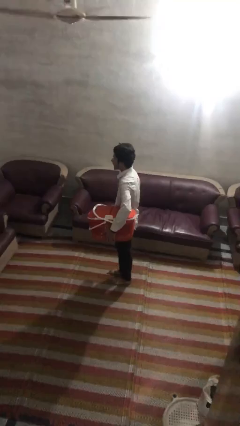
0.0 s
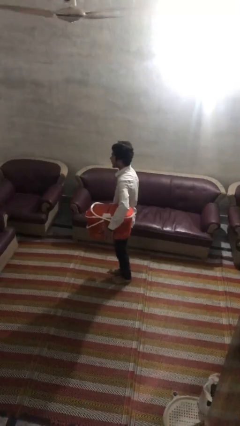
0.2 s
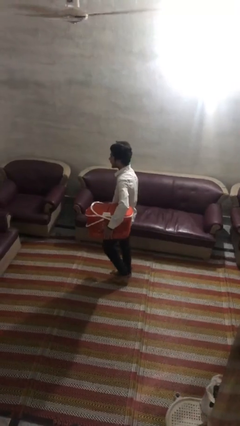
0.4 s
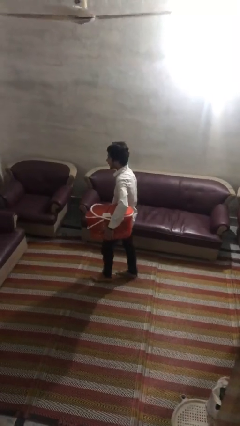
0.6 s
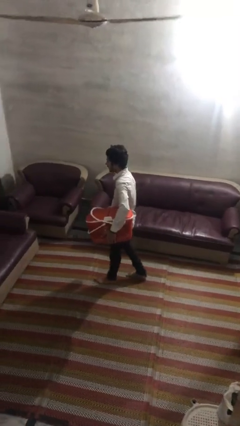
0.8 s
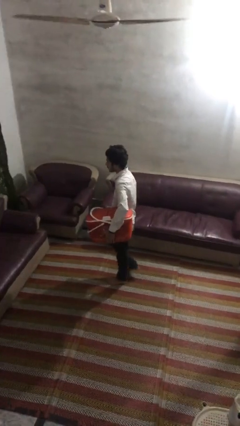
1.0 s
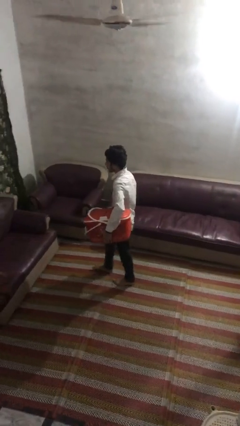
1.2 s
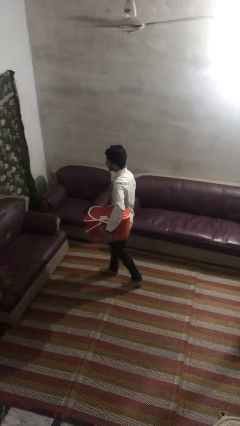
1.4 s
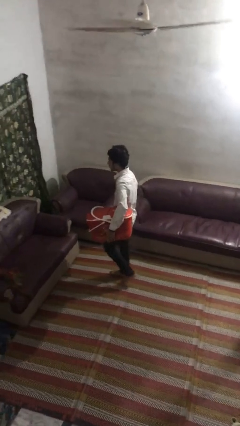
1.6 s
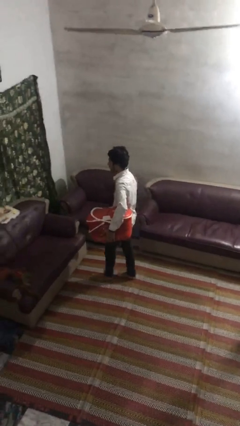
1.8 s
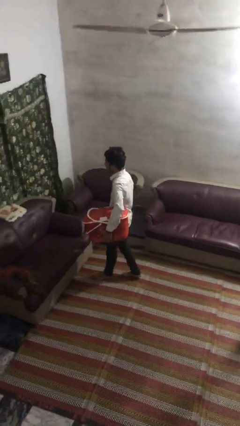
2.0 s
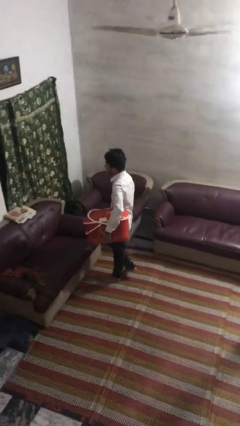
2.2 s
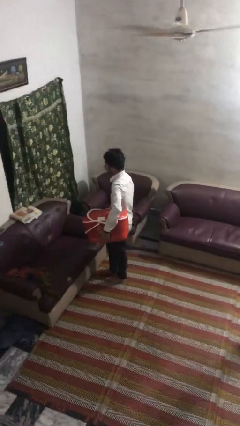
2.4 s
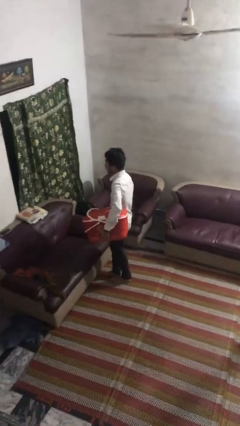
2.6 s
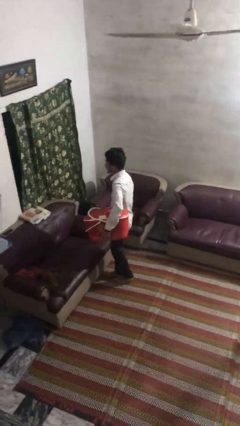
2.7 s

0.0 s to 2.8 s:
person carries laundry basket

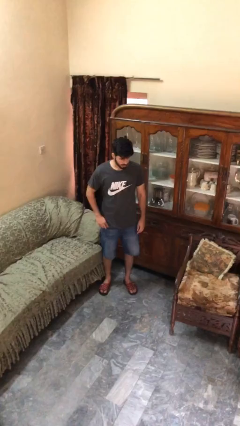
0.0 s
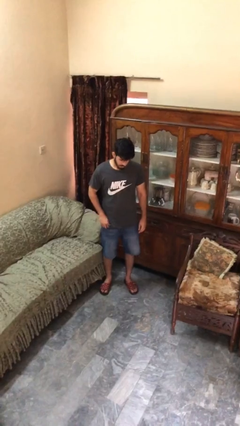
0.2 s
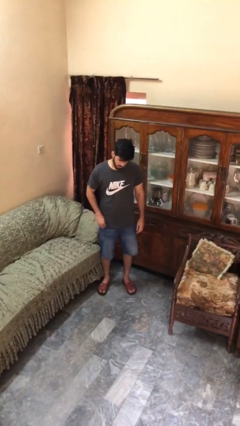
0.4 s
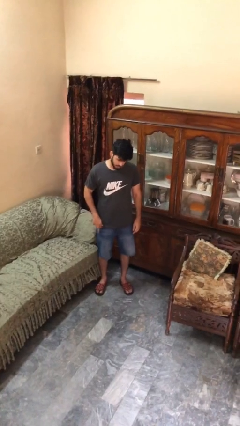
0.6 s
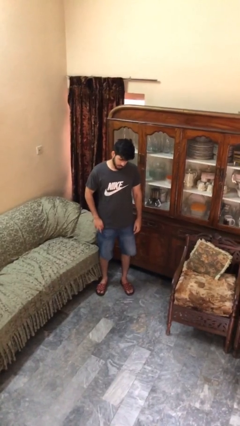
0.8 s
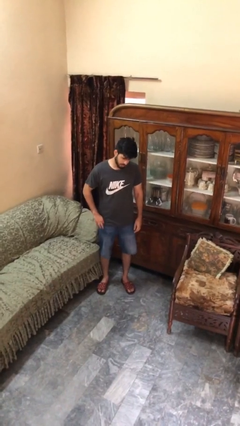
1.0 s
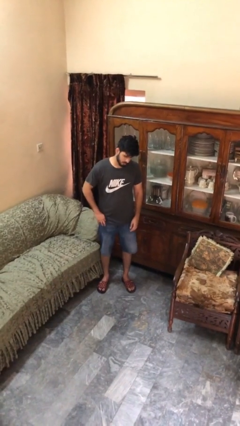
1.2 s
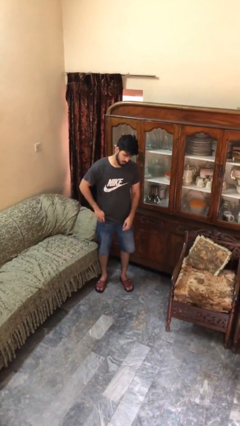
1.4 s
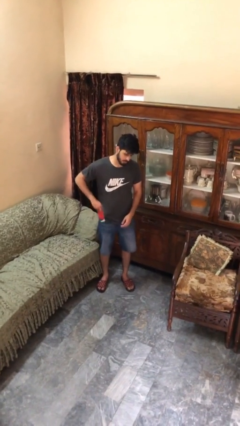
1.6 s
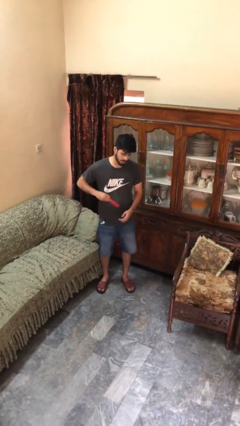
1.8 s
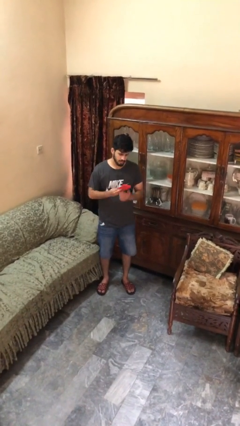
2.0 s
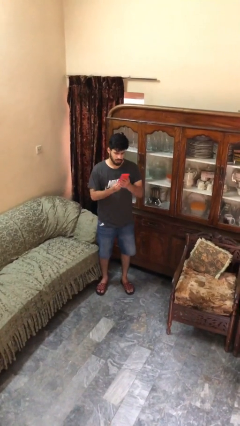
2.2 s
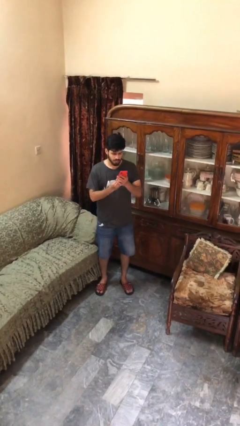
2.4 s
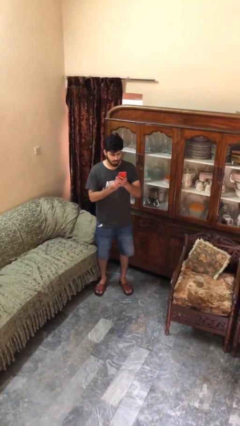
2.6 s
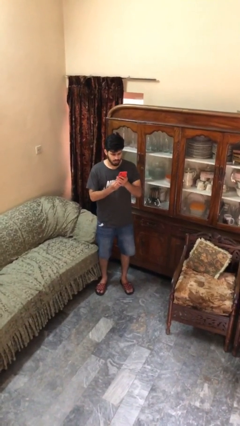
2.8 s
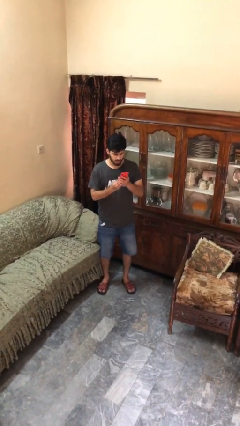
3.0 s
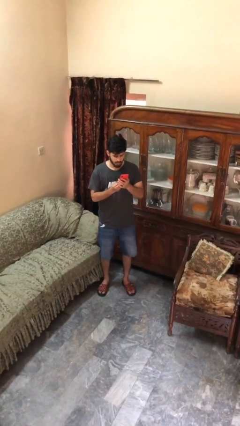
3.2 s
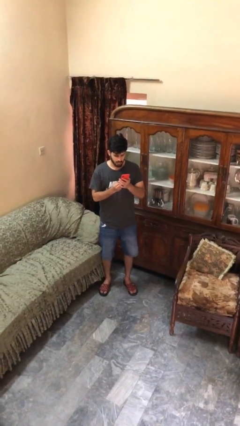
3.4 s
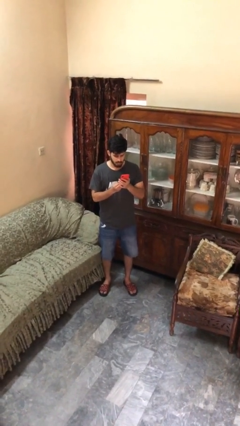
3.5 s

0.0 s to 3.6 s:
person takes phone from pocket

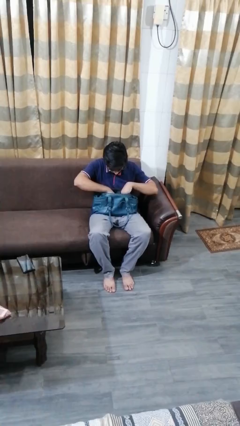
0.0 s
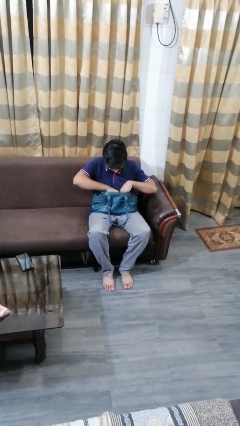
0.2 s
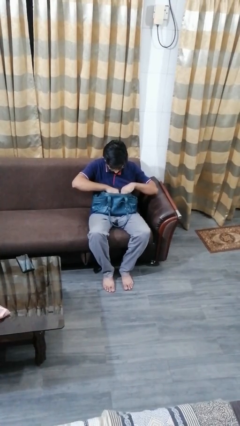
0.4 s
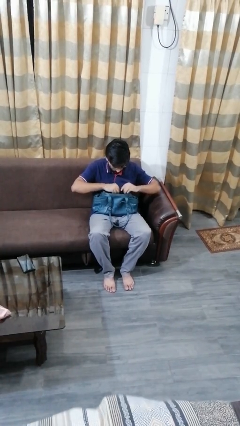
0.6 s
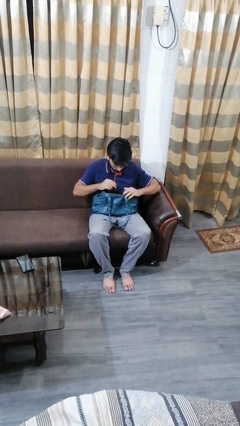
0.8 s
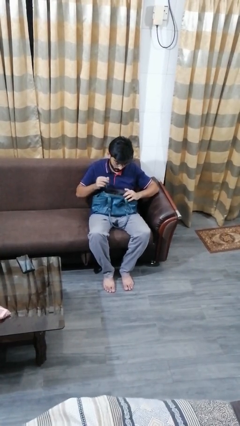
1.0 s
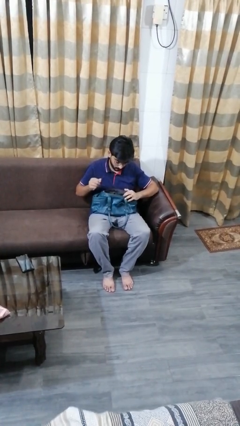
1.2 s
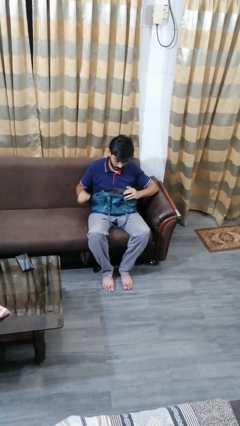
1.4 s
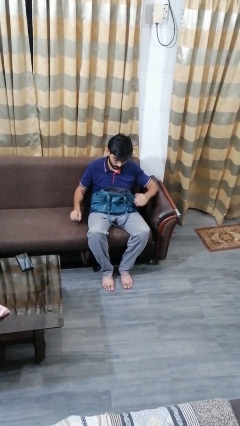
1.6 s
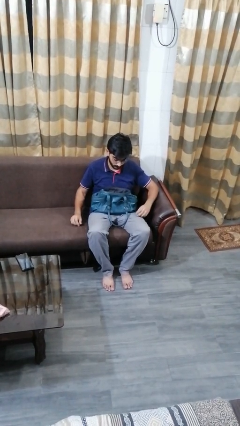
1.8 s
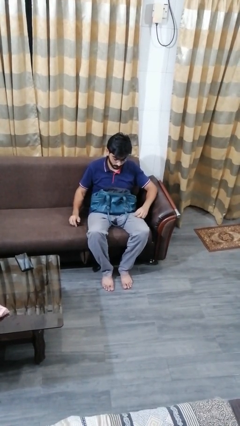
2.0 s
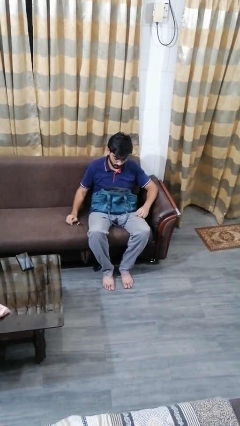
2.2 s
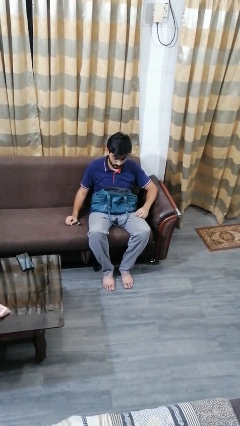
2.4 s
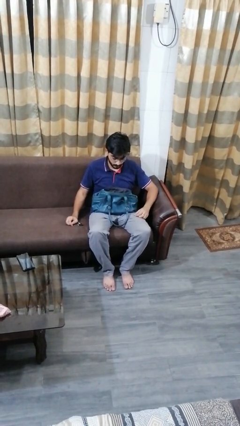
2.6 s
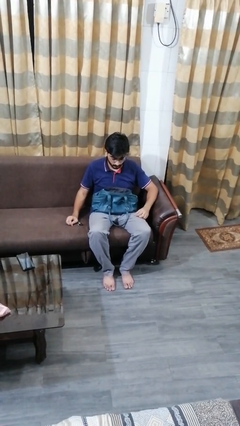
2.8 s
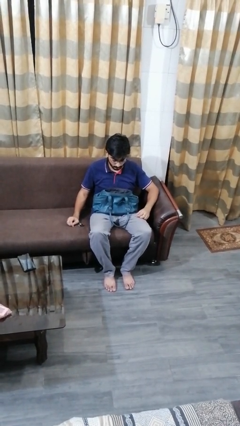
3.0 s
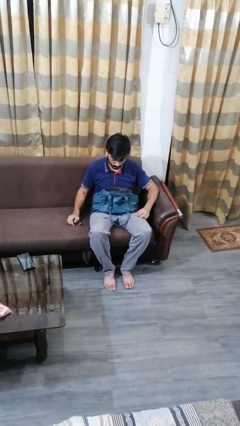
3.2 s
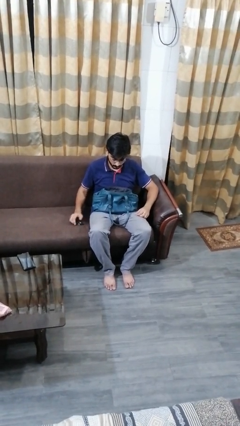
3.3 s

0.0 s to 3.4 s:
person takes object from purse

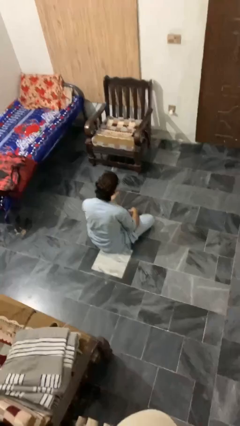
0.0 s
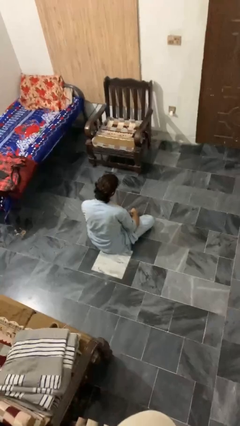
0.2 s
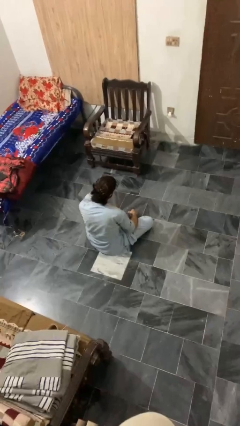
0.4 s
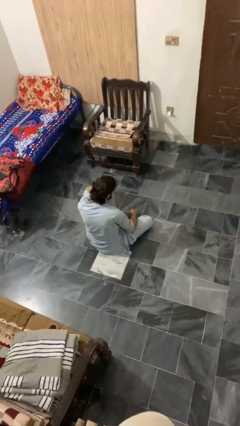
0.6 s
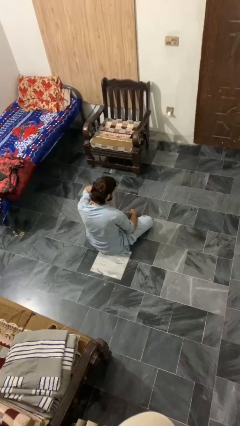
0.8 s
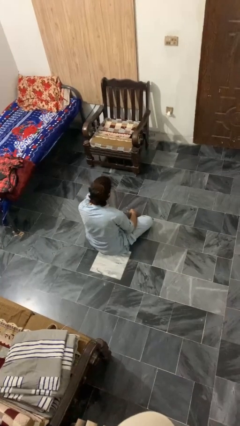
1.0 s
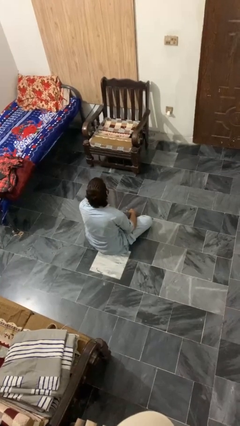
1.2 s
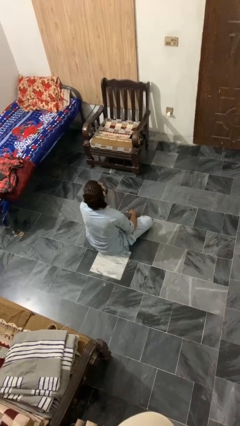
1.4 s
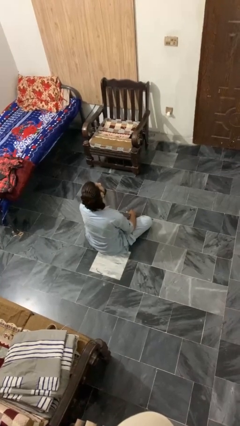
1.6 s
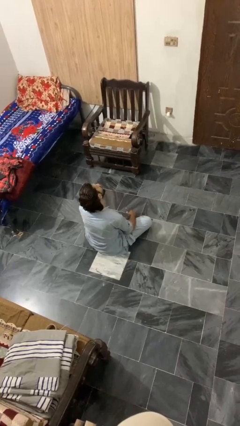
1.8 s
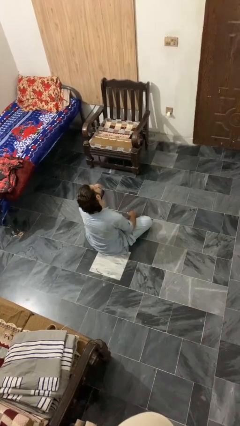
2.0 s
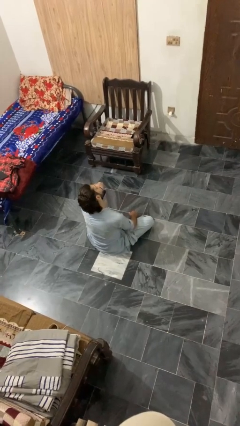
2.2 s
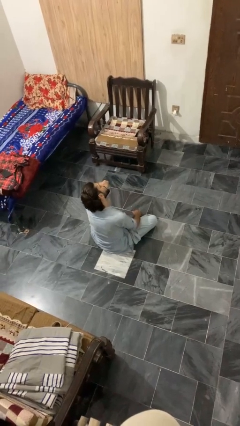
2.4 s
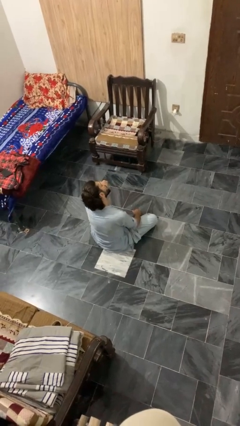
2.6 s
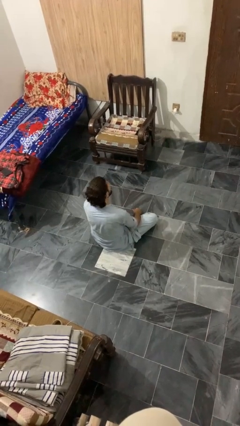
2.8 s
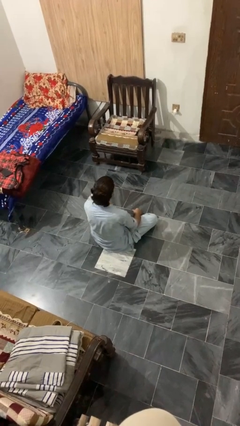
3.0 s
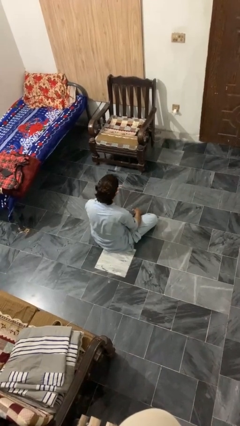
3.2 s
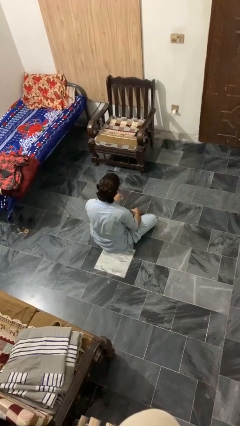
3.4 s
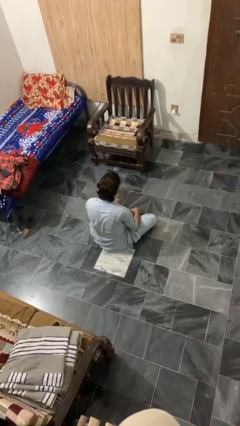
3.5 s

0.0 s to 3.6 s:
person rubs neck

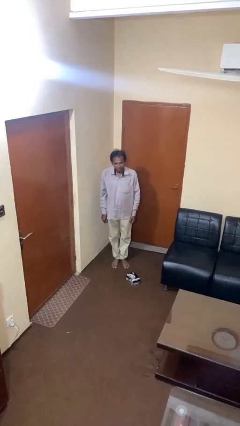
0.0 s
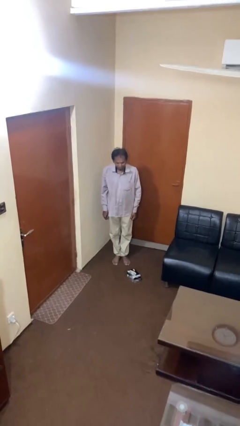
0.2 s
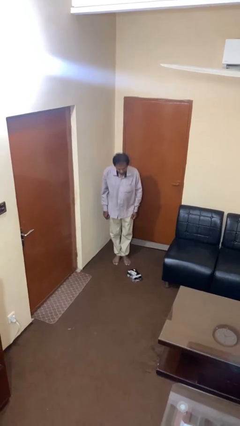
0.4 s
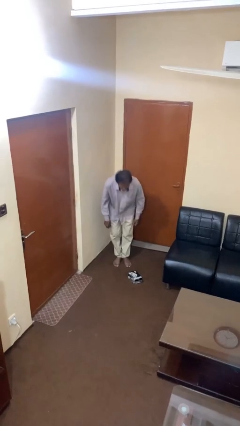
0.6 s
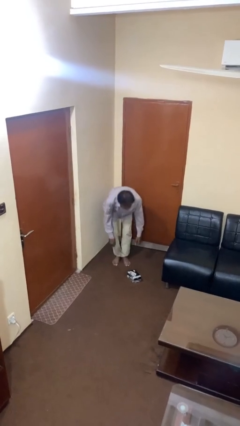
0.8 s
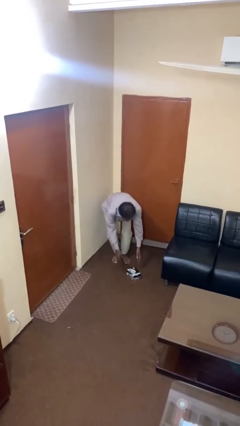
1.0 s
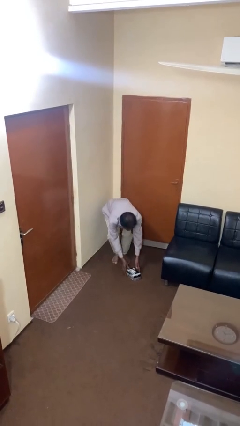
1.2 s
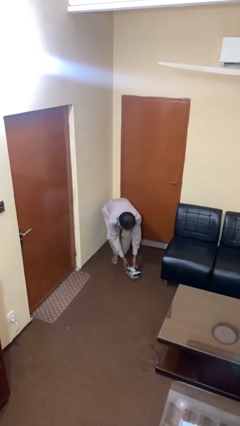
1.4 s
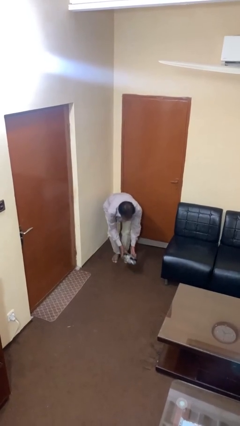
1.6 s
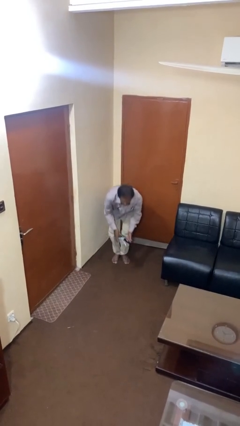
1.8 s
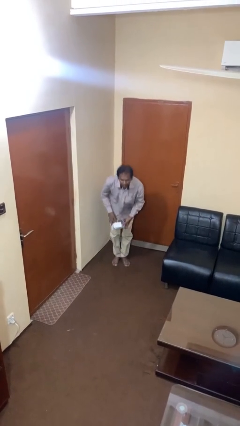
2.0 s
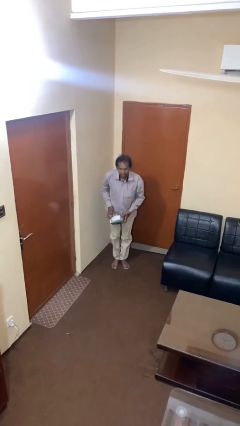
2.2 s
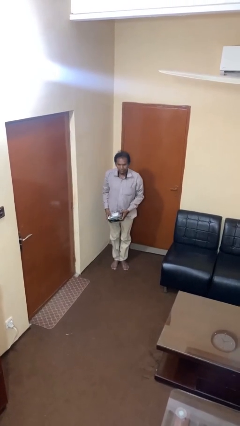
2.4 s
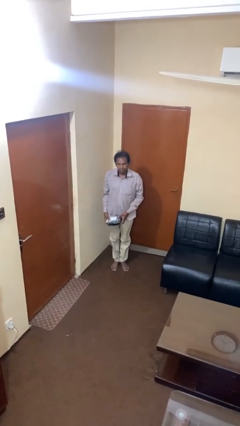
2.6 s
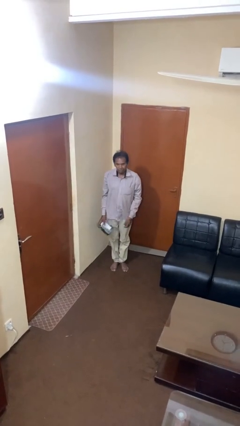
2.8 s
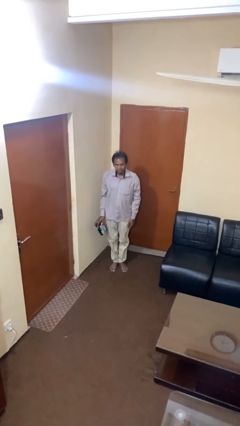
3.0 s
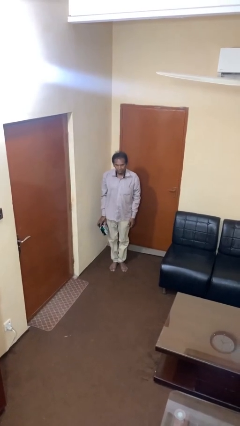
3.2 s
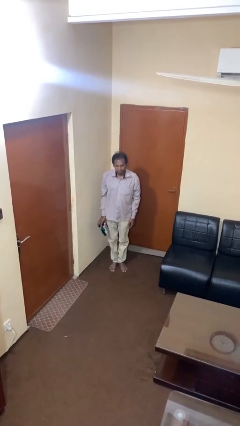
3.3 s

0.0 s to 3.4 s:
person picks up object from floor

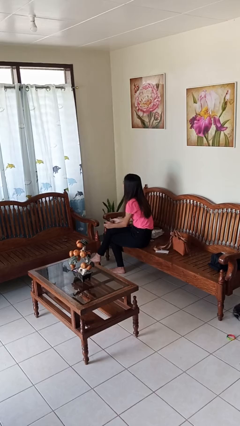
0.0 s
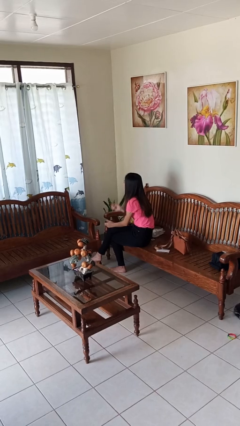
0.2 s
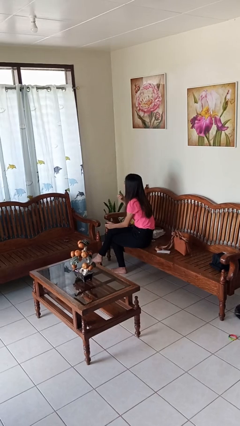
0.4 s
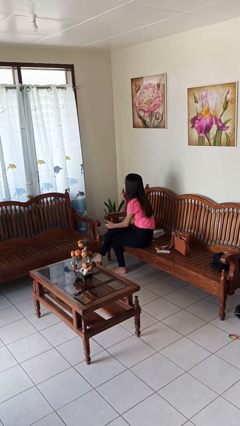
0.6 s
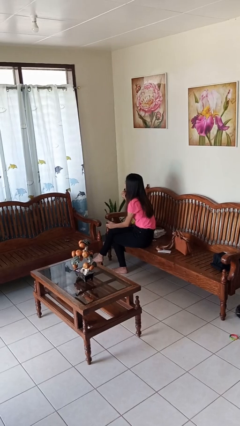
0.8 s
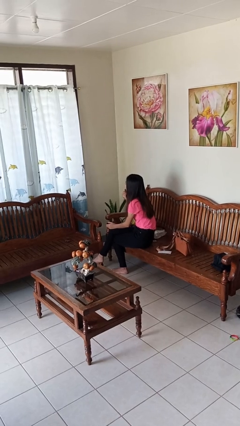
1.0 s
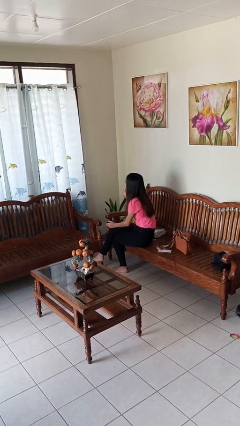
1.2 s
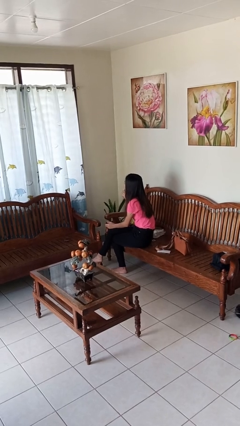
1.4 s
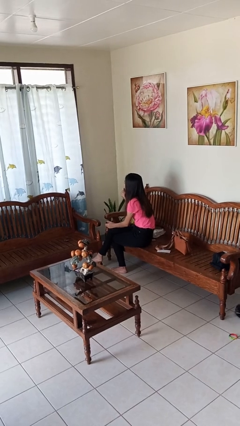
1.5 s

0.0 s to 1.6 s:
person applies lip makeup
